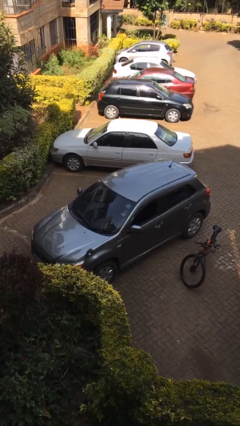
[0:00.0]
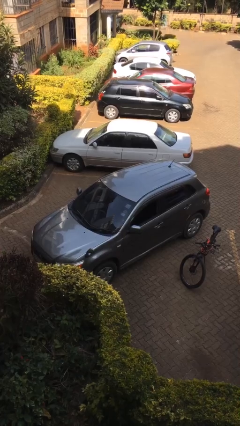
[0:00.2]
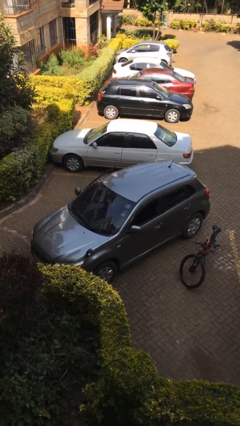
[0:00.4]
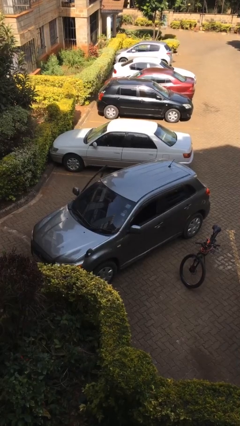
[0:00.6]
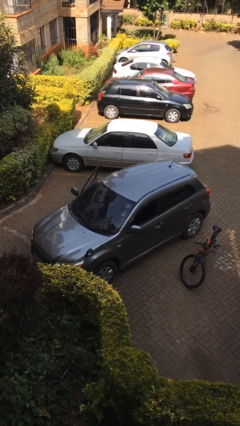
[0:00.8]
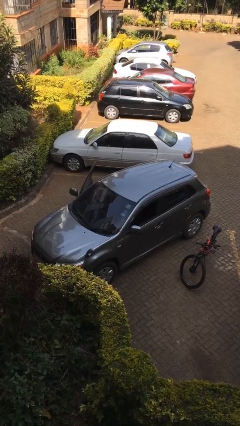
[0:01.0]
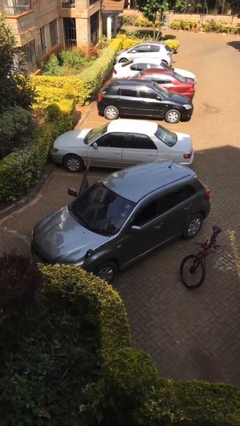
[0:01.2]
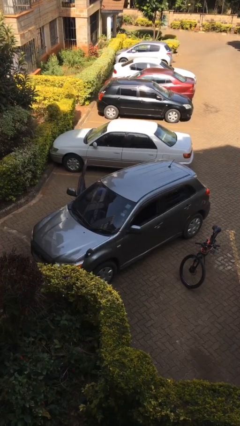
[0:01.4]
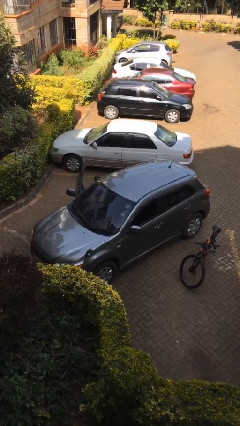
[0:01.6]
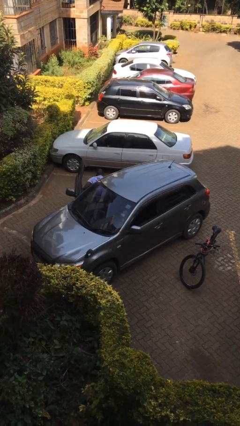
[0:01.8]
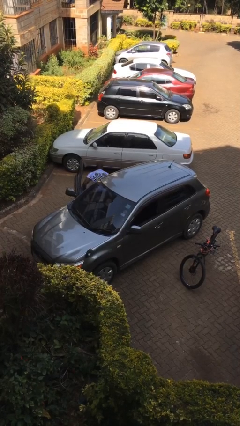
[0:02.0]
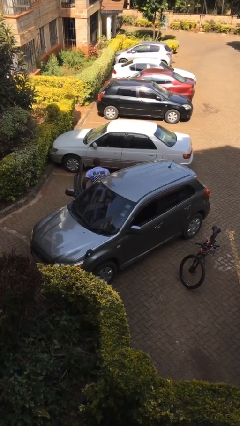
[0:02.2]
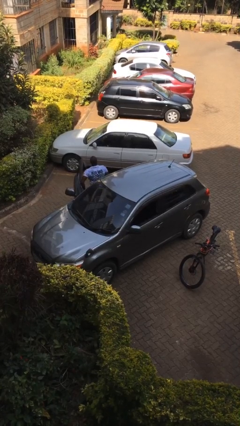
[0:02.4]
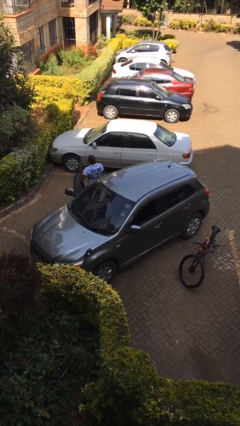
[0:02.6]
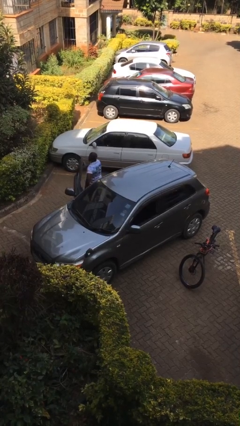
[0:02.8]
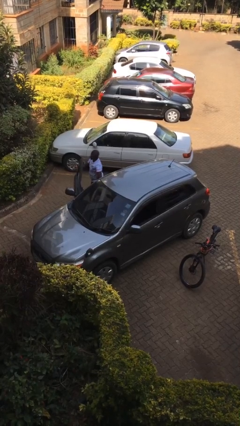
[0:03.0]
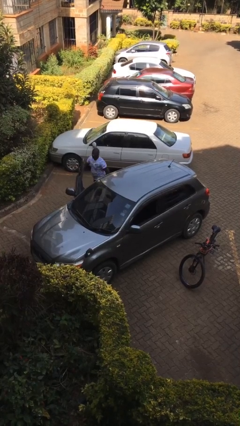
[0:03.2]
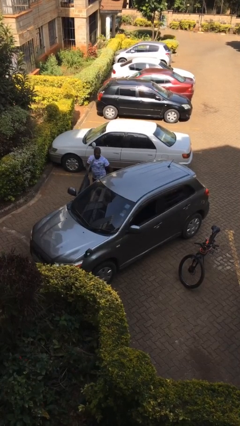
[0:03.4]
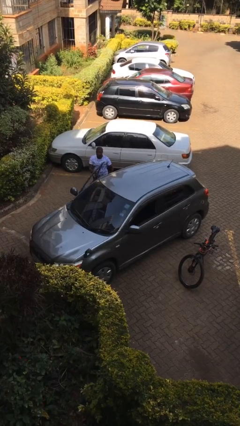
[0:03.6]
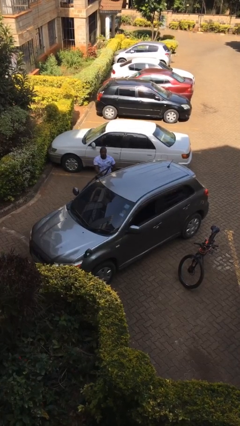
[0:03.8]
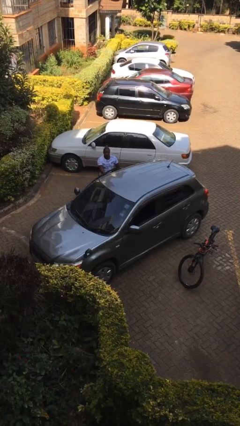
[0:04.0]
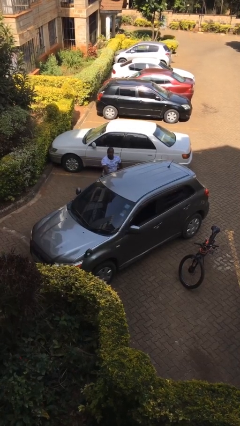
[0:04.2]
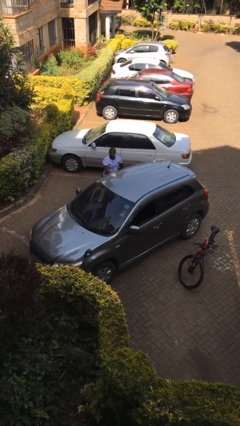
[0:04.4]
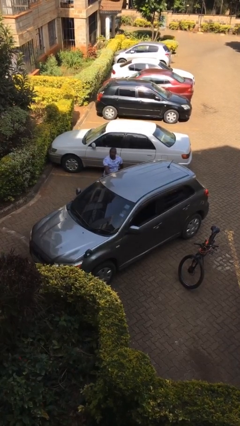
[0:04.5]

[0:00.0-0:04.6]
car drops off person

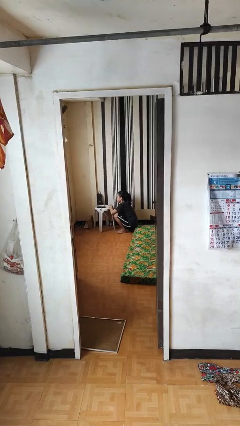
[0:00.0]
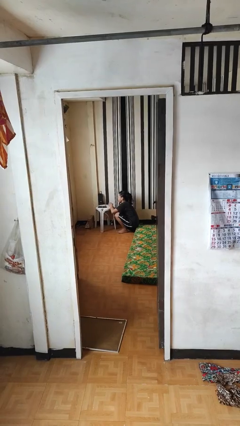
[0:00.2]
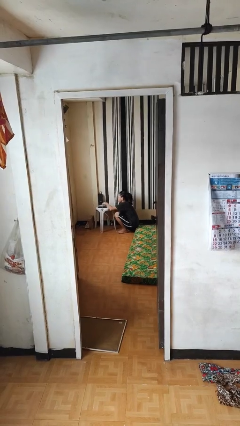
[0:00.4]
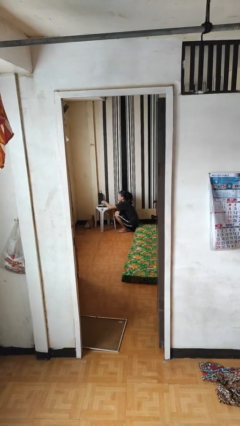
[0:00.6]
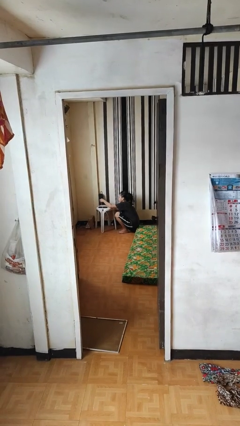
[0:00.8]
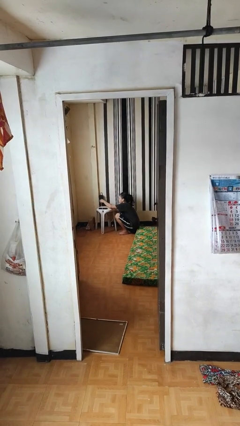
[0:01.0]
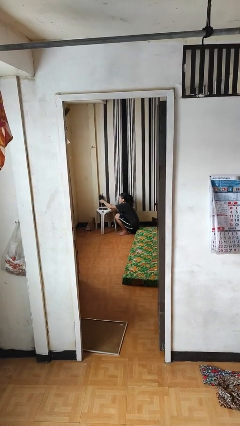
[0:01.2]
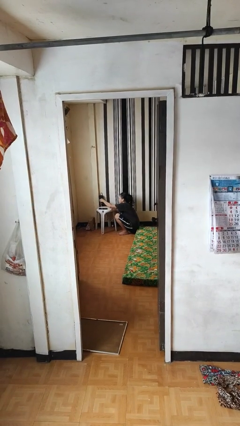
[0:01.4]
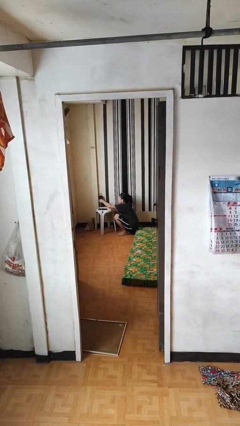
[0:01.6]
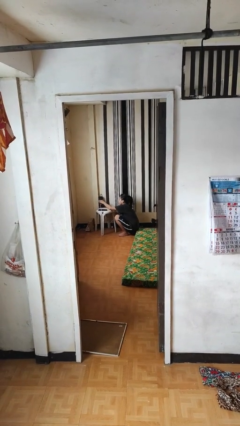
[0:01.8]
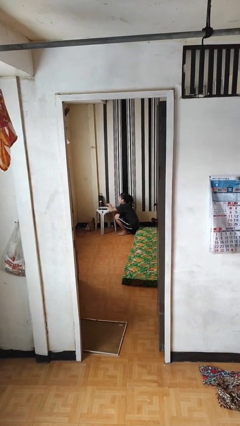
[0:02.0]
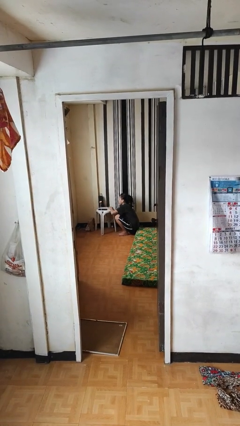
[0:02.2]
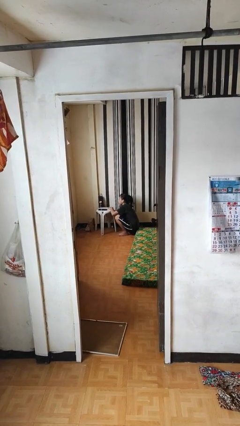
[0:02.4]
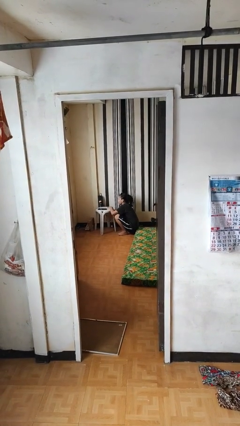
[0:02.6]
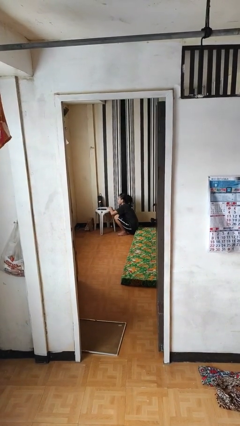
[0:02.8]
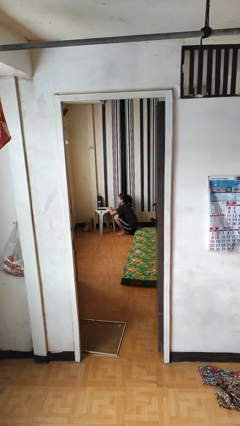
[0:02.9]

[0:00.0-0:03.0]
person plugs into electrical socket

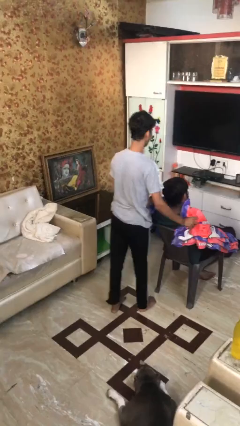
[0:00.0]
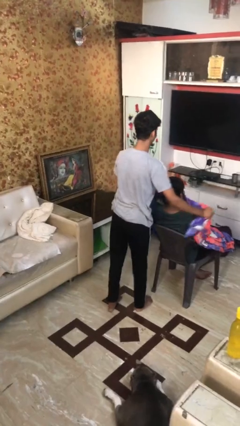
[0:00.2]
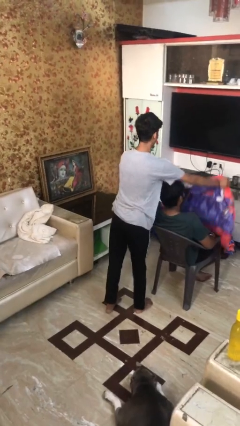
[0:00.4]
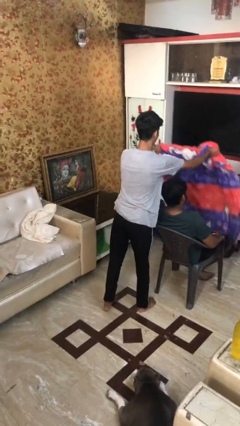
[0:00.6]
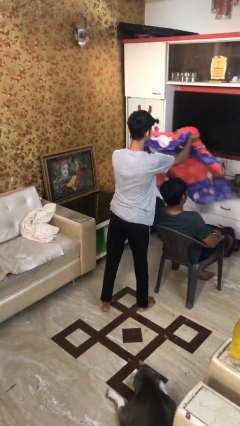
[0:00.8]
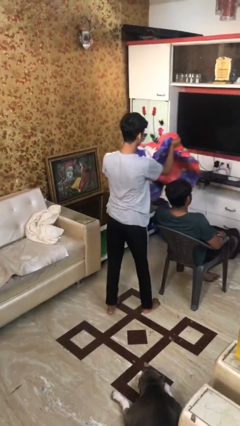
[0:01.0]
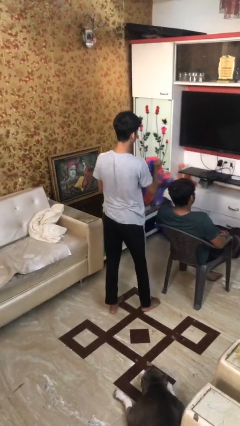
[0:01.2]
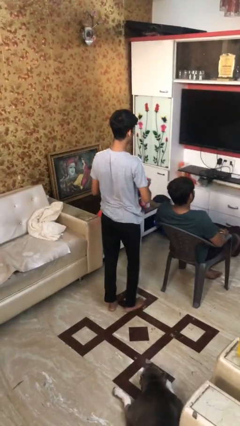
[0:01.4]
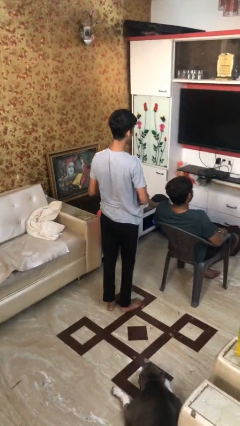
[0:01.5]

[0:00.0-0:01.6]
person uncovers friend with blanket

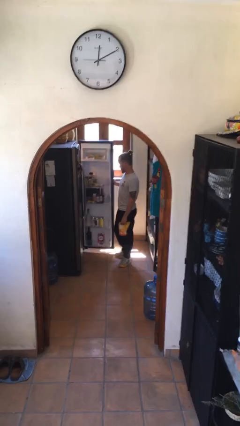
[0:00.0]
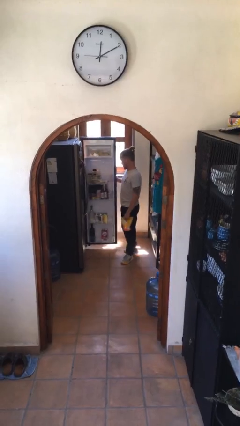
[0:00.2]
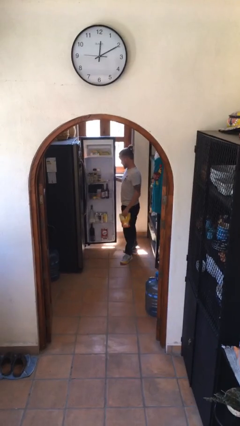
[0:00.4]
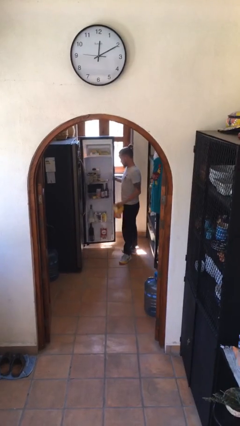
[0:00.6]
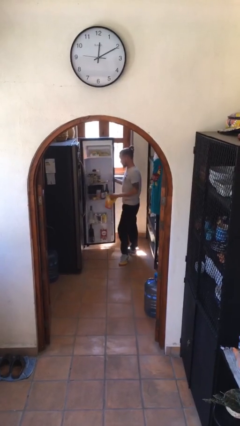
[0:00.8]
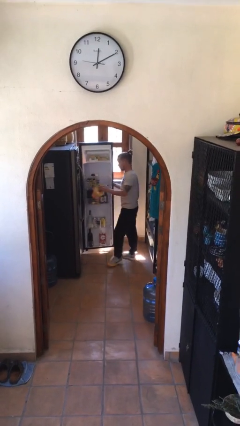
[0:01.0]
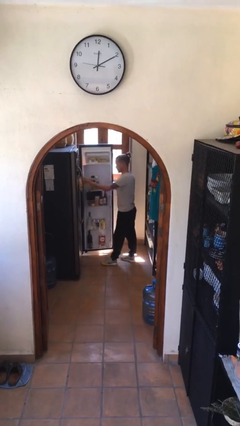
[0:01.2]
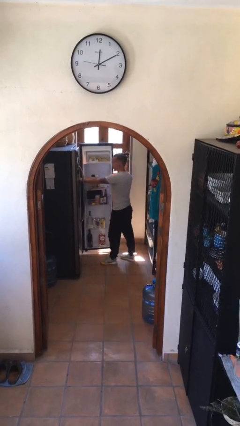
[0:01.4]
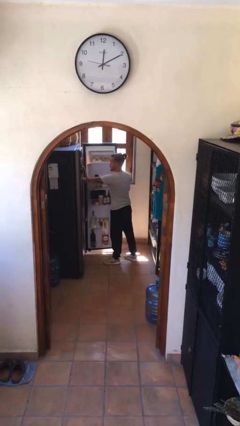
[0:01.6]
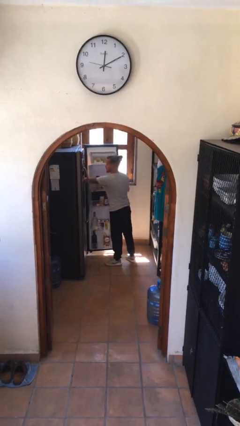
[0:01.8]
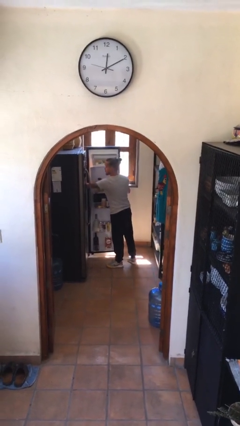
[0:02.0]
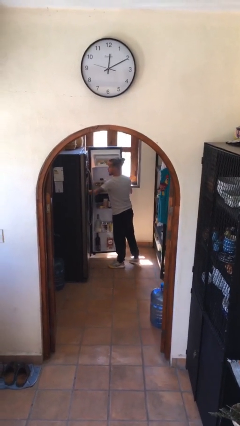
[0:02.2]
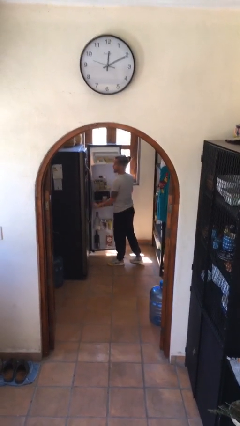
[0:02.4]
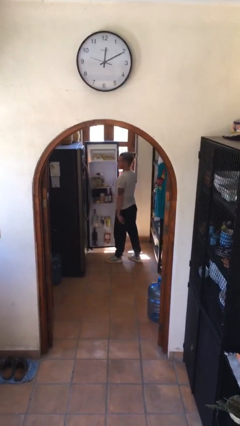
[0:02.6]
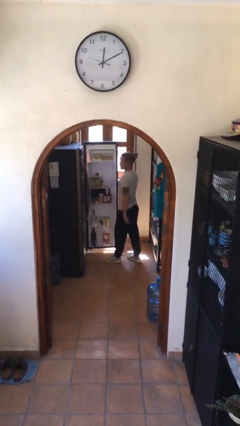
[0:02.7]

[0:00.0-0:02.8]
person puts object into refrigerator

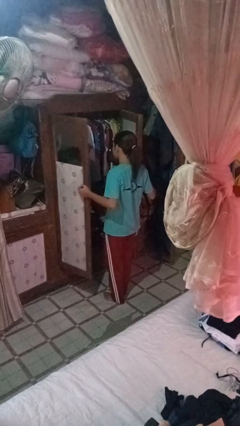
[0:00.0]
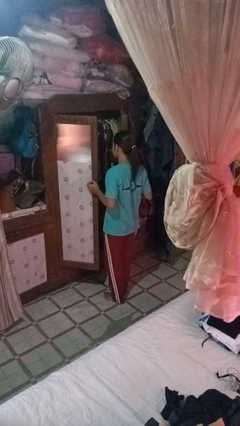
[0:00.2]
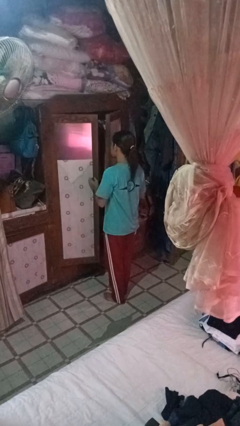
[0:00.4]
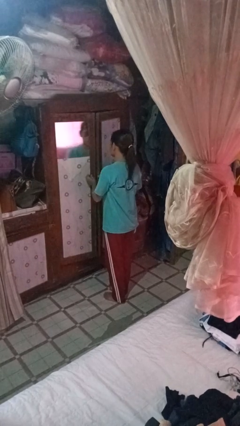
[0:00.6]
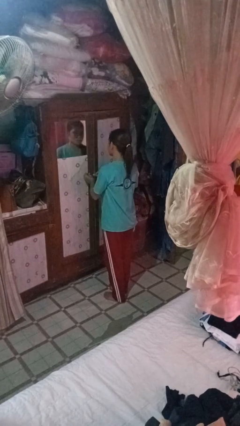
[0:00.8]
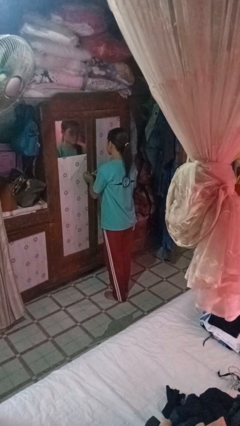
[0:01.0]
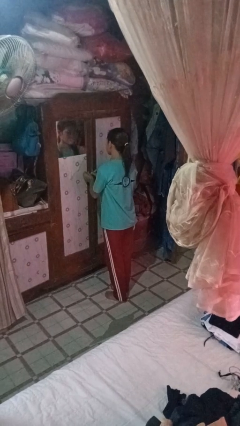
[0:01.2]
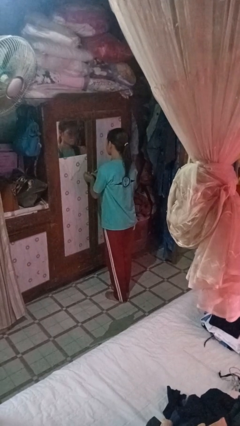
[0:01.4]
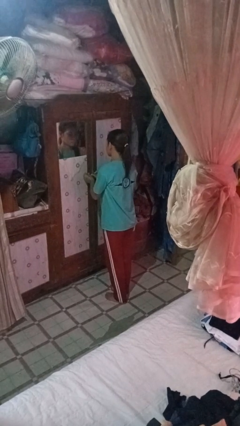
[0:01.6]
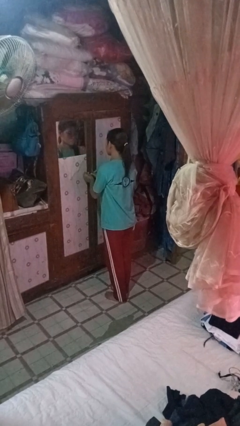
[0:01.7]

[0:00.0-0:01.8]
person closes closet door

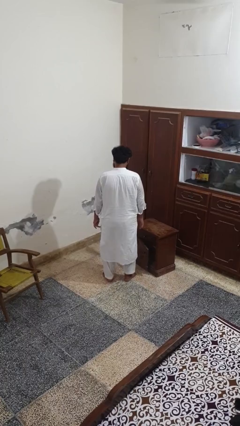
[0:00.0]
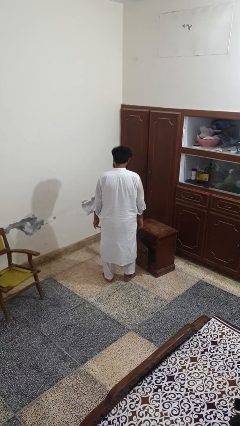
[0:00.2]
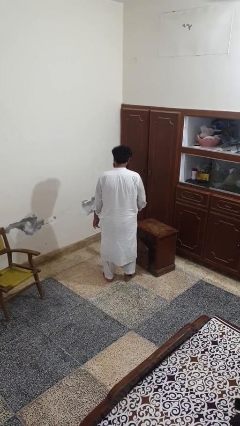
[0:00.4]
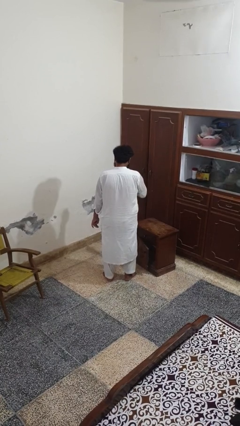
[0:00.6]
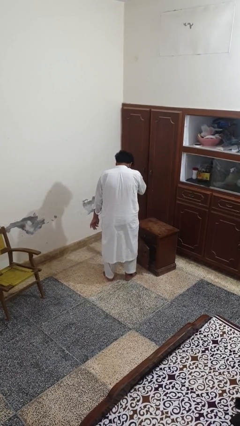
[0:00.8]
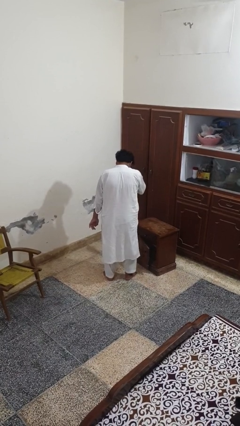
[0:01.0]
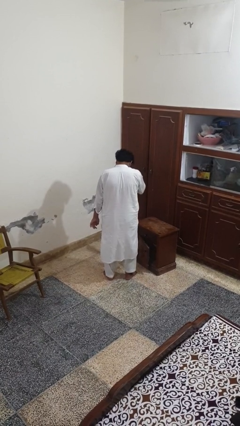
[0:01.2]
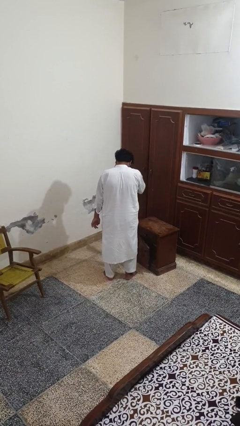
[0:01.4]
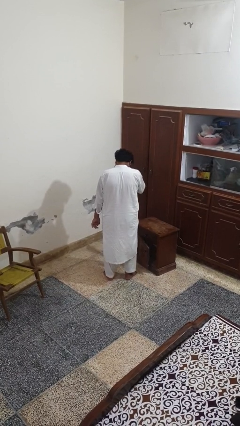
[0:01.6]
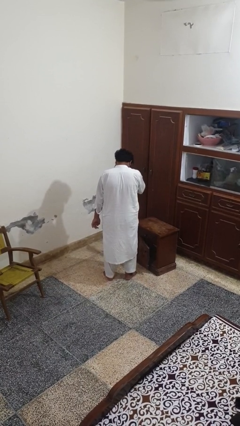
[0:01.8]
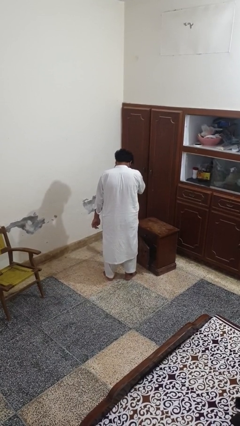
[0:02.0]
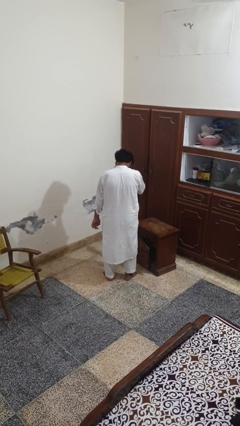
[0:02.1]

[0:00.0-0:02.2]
person sneezes into hand

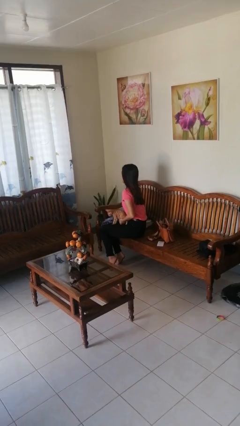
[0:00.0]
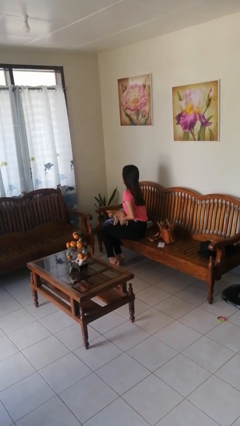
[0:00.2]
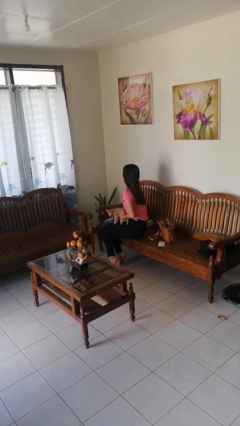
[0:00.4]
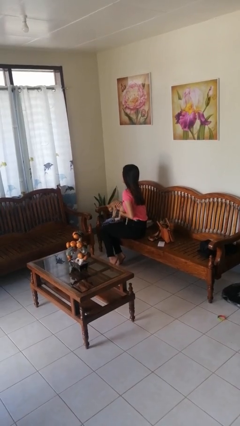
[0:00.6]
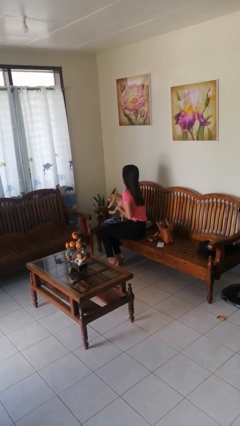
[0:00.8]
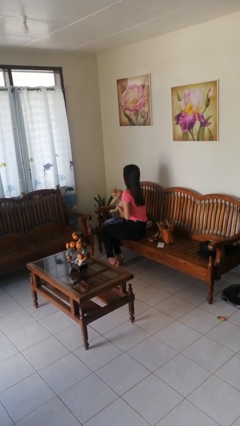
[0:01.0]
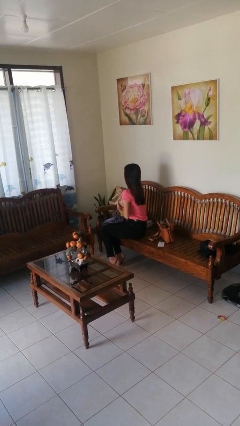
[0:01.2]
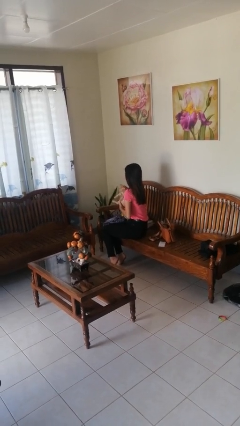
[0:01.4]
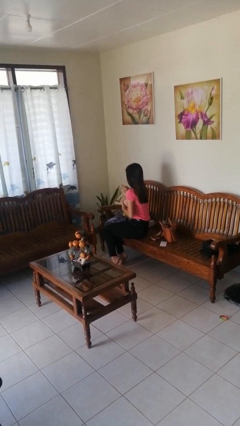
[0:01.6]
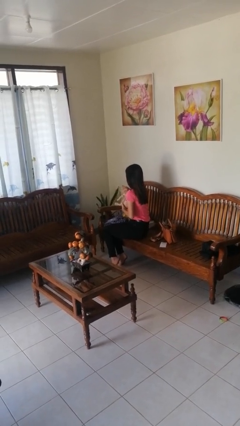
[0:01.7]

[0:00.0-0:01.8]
person hugs cat
